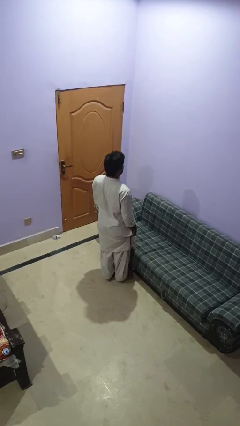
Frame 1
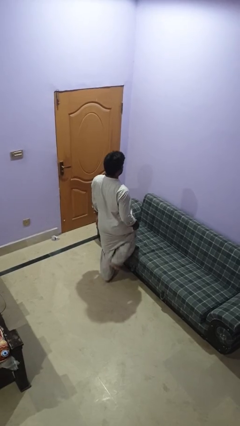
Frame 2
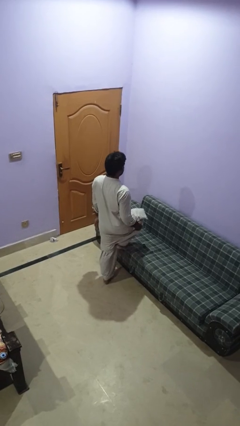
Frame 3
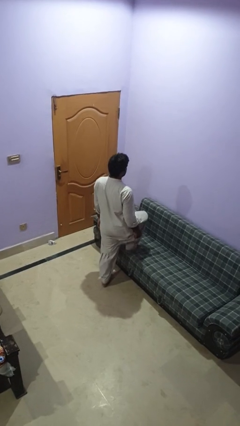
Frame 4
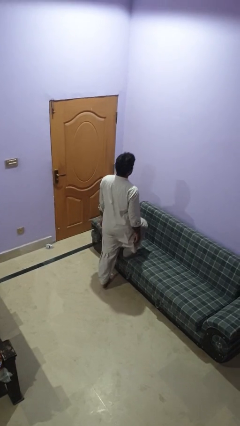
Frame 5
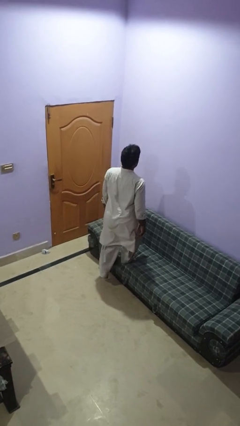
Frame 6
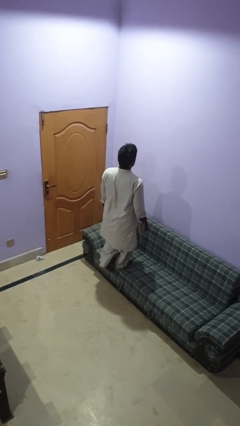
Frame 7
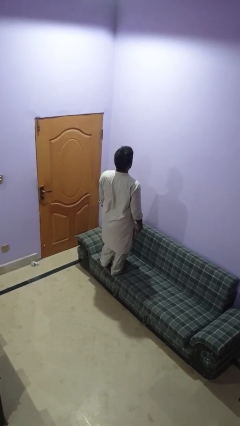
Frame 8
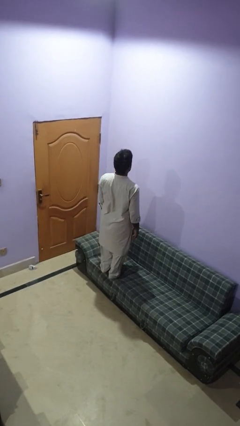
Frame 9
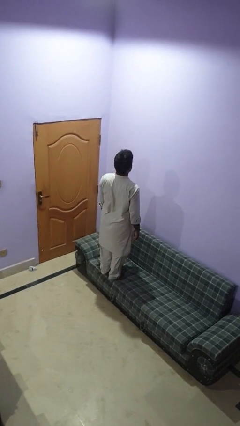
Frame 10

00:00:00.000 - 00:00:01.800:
person climbs on couch

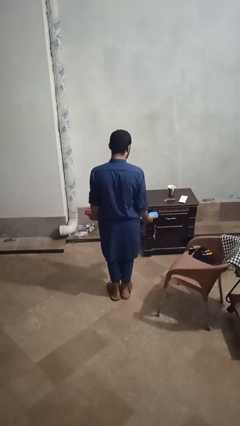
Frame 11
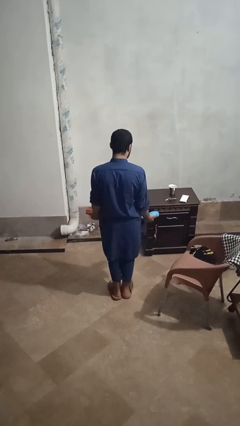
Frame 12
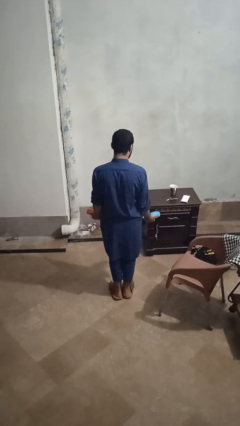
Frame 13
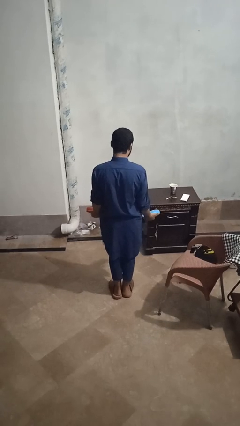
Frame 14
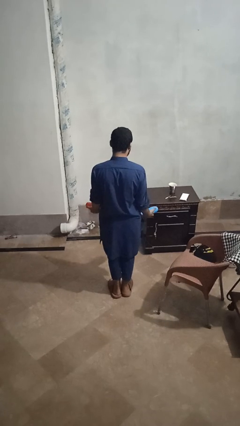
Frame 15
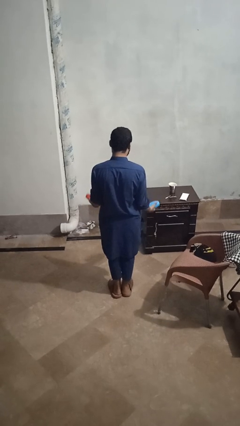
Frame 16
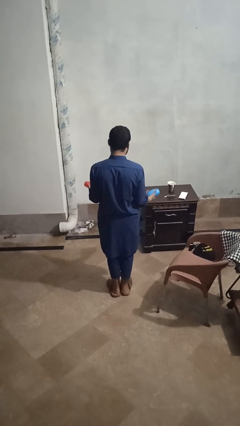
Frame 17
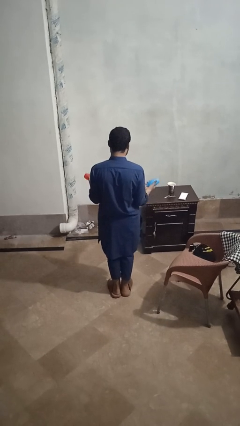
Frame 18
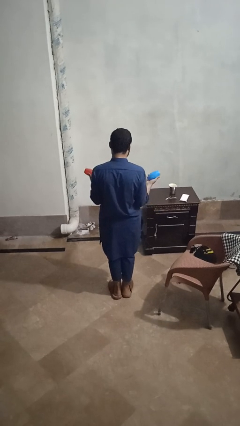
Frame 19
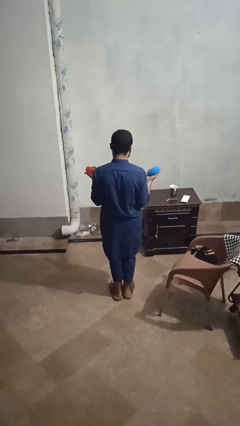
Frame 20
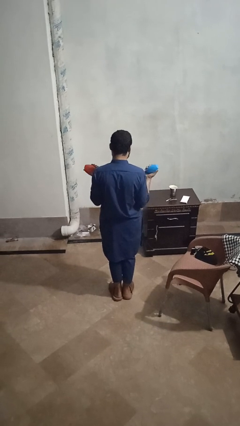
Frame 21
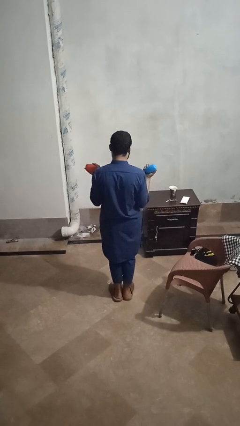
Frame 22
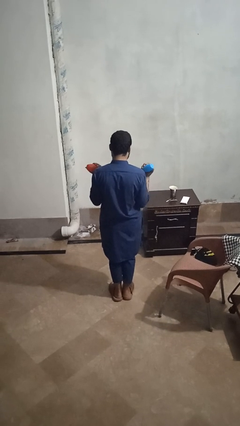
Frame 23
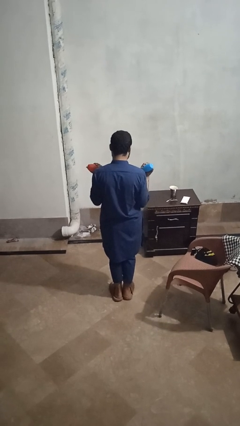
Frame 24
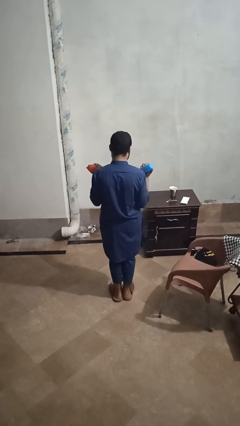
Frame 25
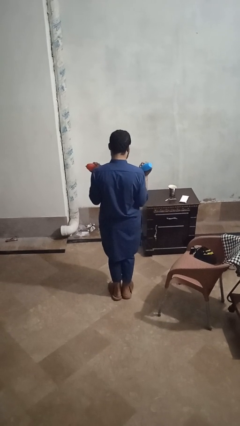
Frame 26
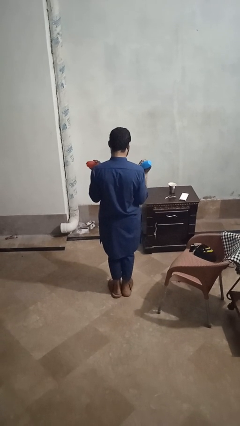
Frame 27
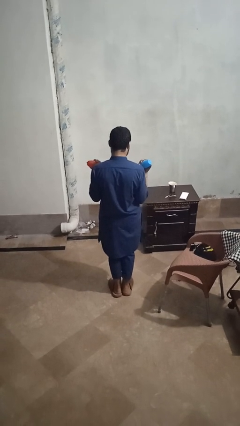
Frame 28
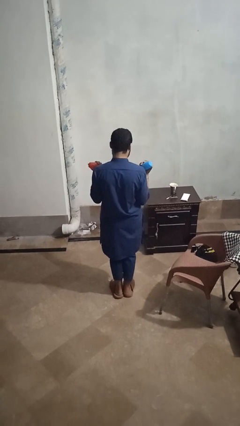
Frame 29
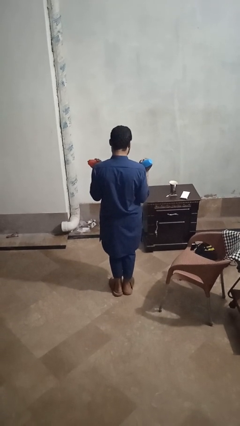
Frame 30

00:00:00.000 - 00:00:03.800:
person lifts dumbbells

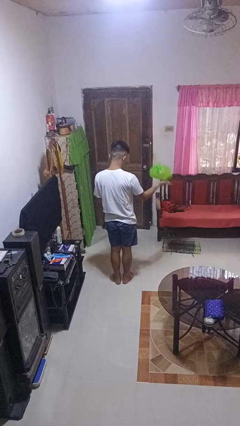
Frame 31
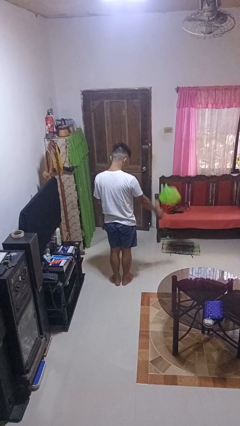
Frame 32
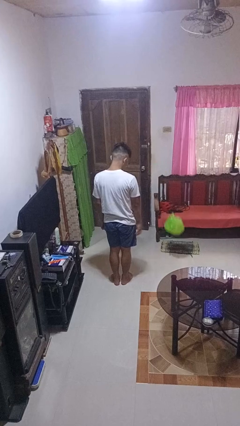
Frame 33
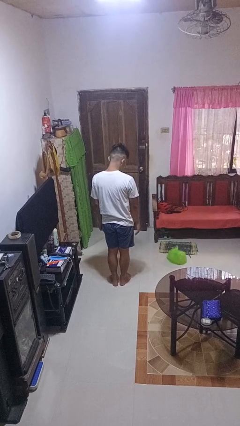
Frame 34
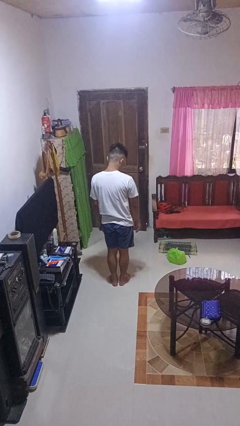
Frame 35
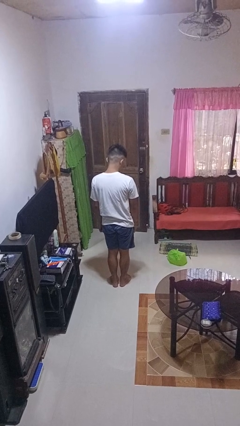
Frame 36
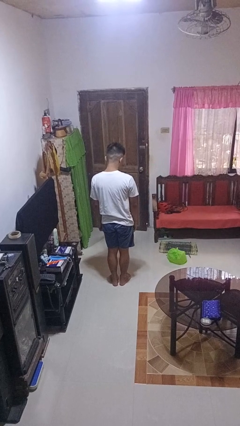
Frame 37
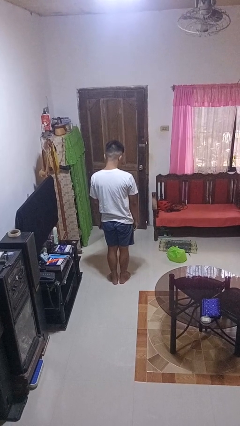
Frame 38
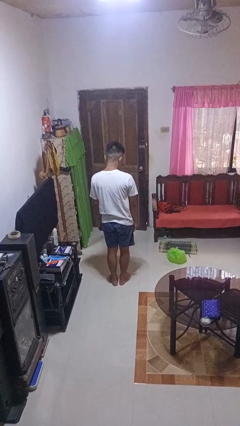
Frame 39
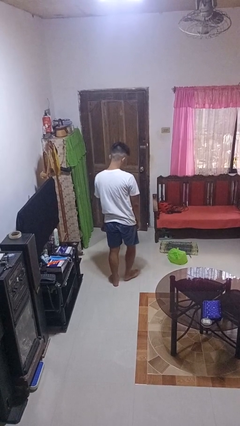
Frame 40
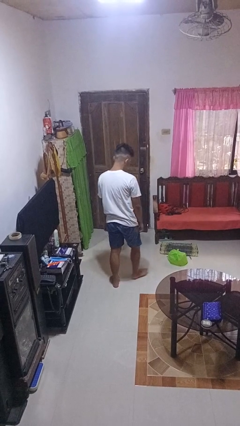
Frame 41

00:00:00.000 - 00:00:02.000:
person throws object to ground

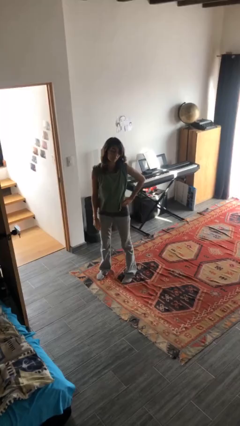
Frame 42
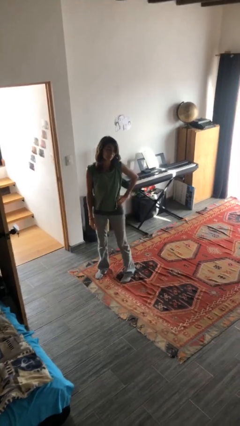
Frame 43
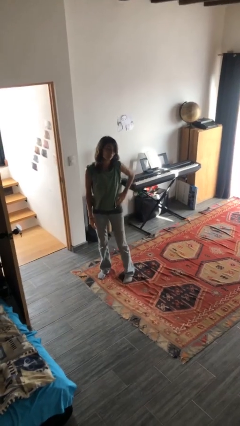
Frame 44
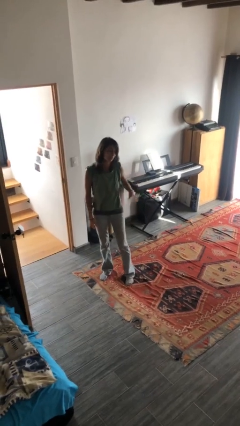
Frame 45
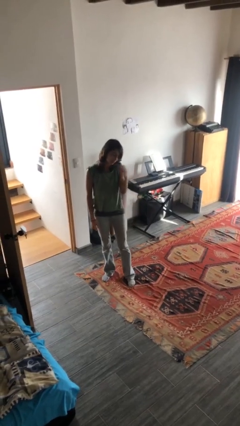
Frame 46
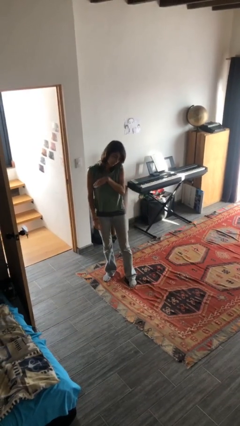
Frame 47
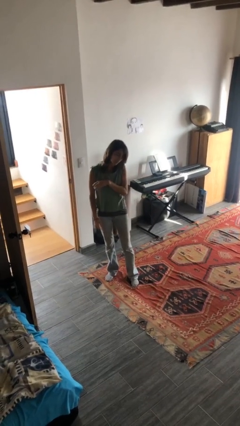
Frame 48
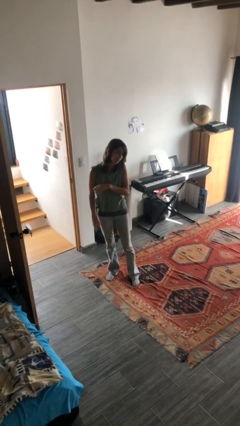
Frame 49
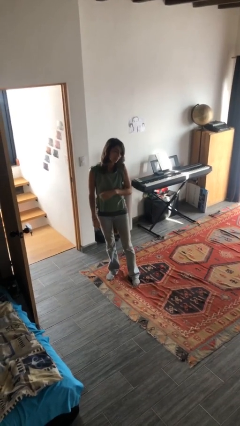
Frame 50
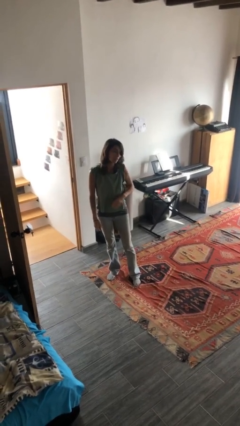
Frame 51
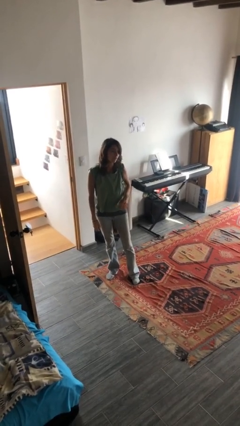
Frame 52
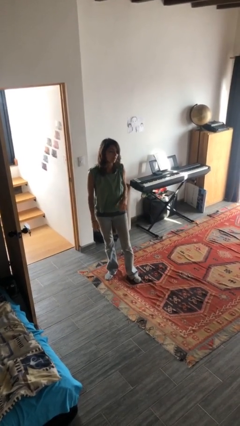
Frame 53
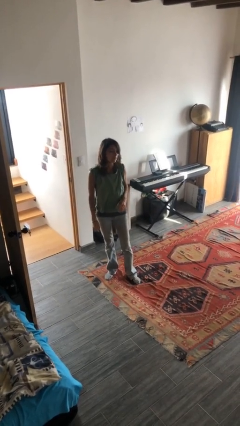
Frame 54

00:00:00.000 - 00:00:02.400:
person gestures come here

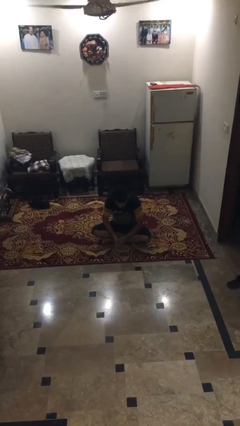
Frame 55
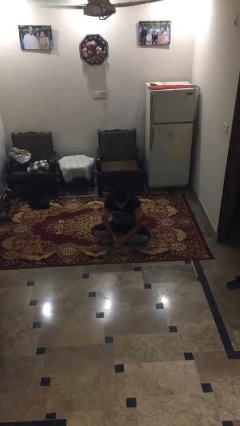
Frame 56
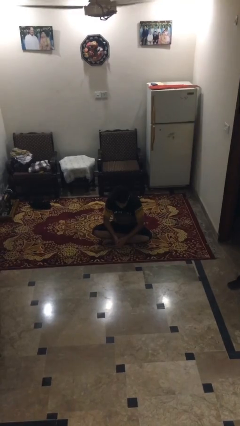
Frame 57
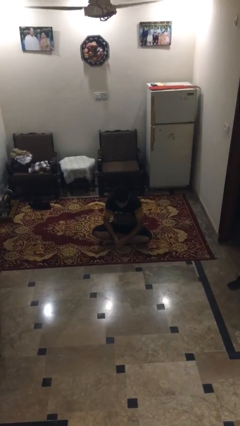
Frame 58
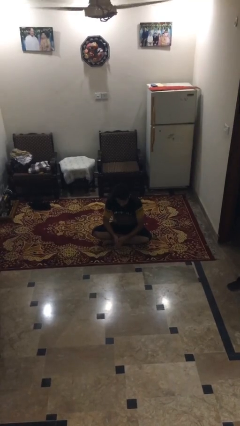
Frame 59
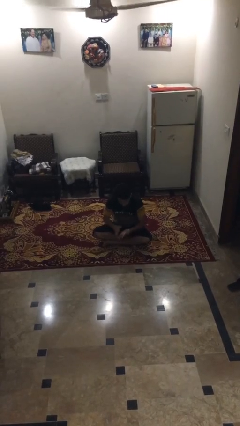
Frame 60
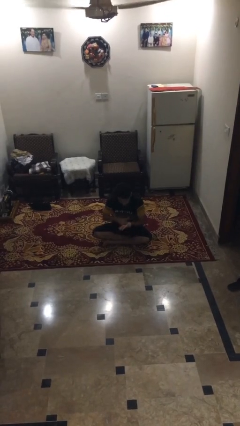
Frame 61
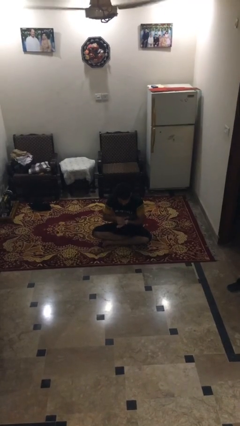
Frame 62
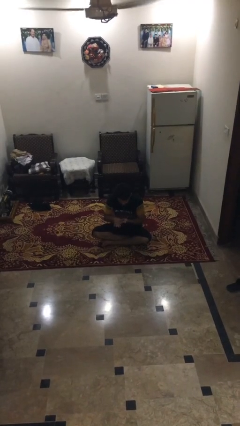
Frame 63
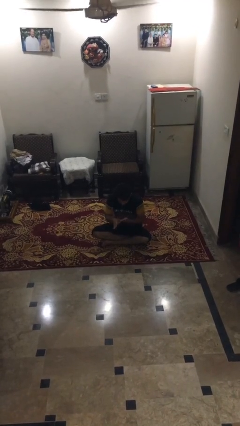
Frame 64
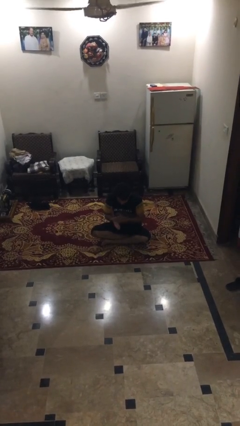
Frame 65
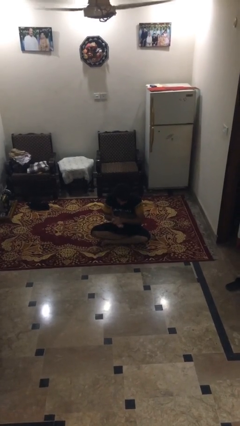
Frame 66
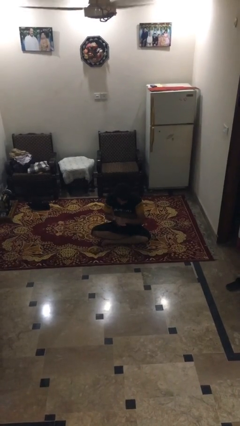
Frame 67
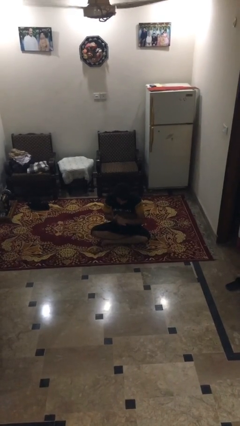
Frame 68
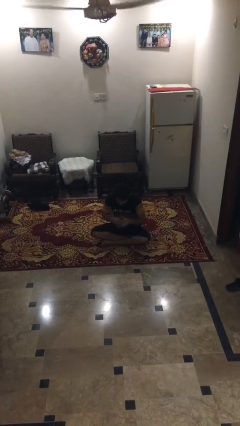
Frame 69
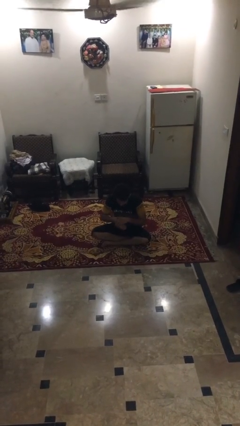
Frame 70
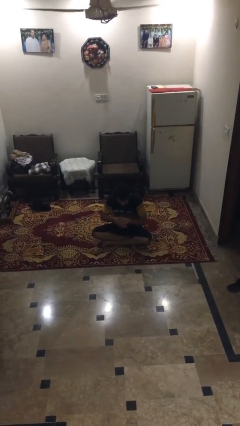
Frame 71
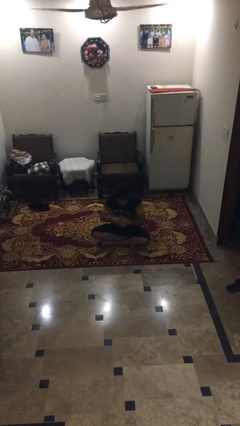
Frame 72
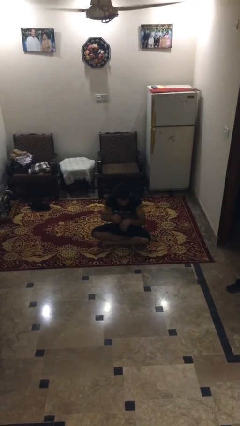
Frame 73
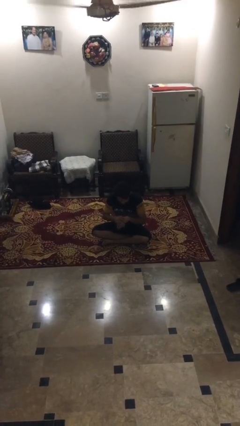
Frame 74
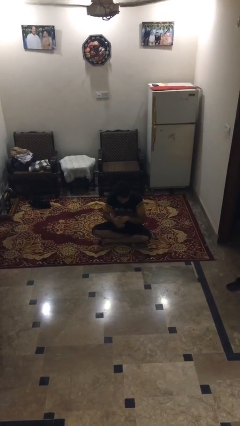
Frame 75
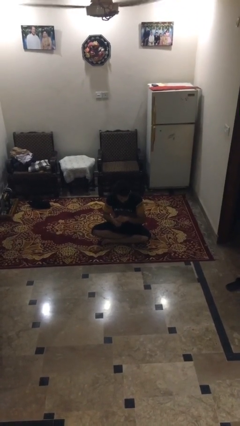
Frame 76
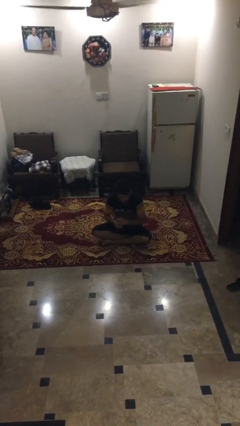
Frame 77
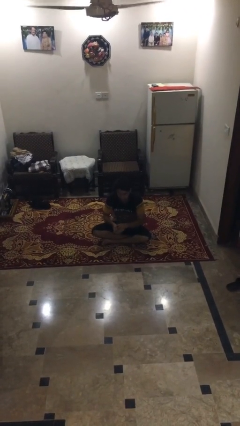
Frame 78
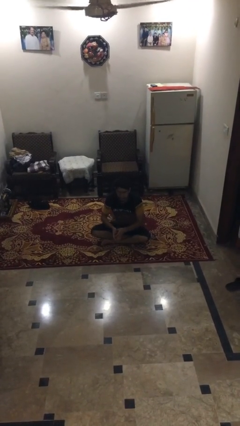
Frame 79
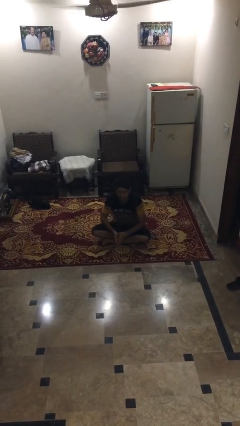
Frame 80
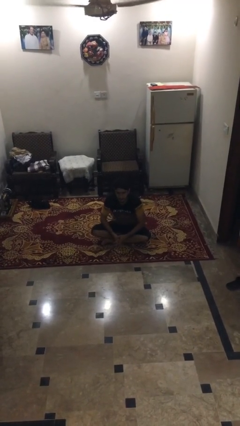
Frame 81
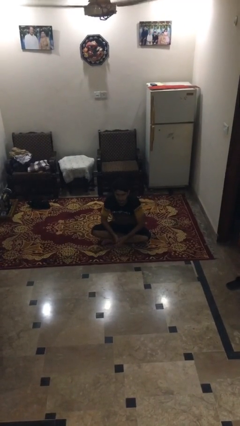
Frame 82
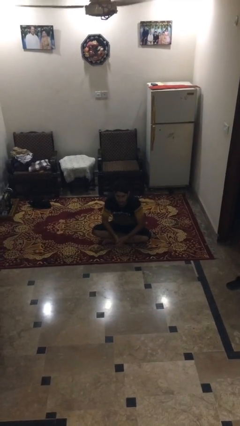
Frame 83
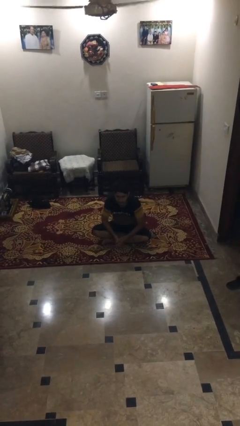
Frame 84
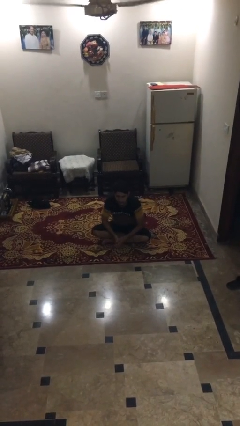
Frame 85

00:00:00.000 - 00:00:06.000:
person looks at hands in lap

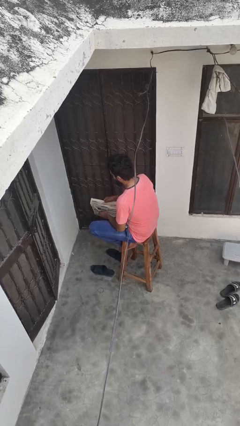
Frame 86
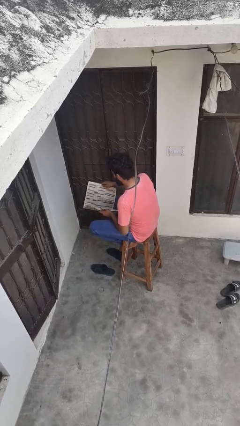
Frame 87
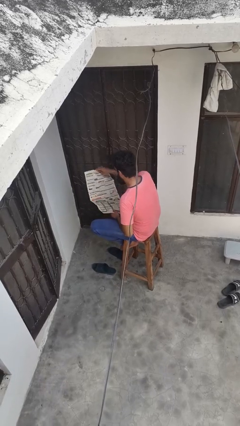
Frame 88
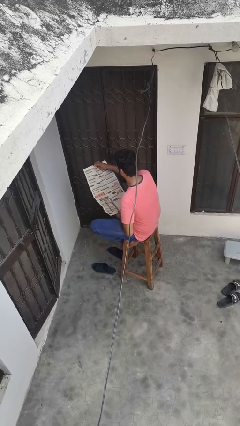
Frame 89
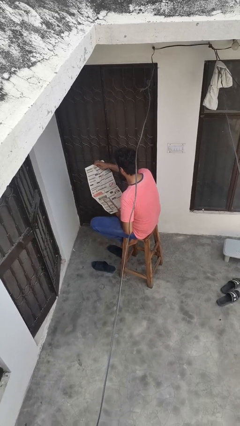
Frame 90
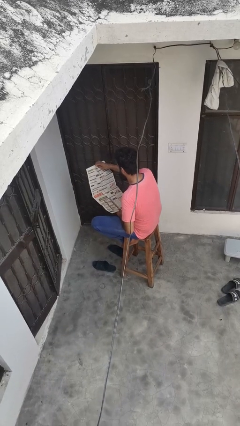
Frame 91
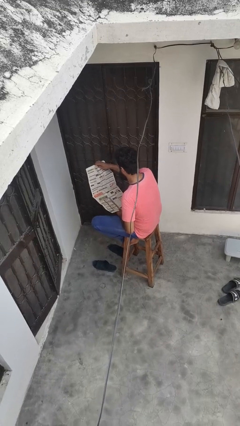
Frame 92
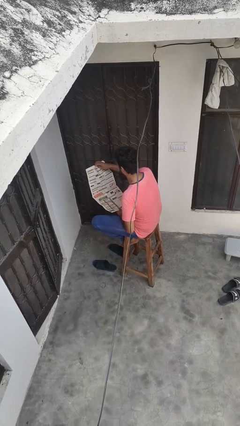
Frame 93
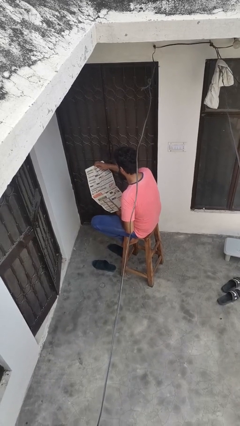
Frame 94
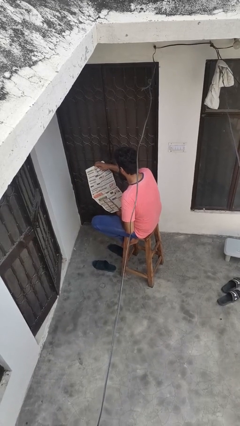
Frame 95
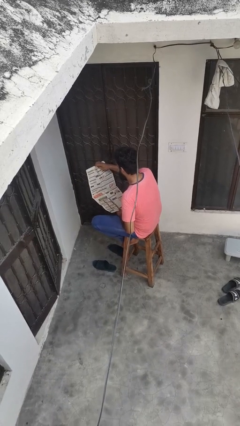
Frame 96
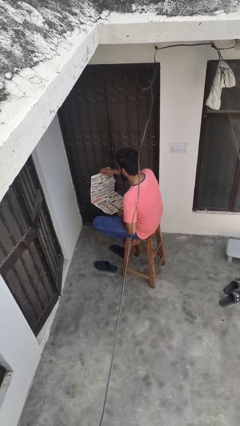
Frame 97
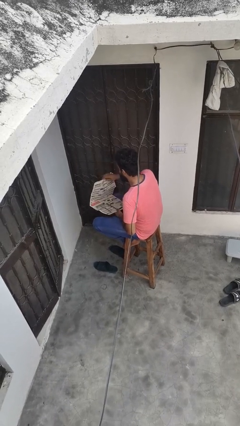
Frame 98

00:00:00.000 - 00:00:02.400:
person reads newspaper
